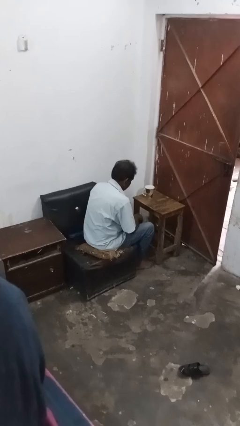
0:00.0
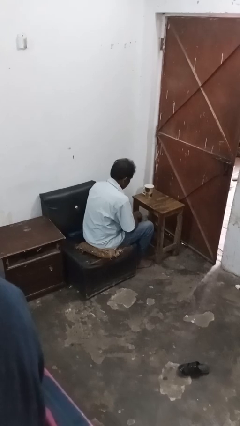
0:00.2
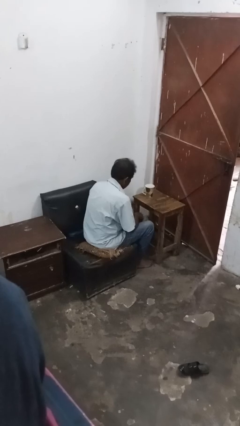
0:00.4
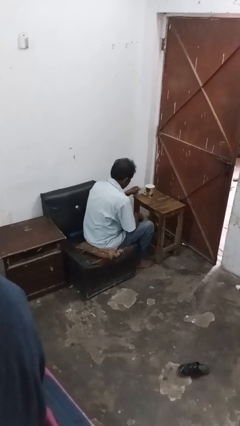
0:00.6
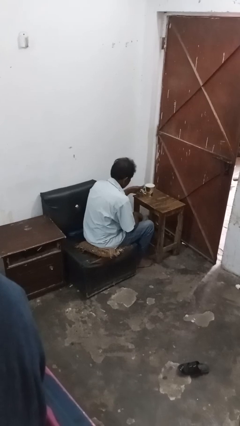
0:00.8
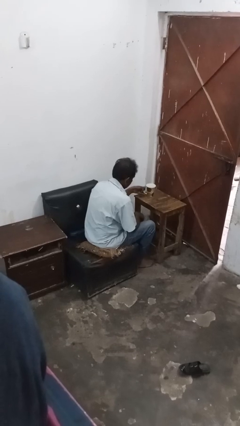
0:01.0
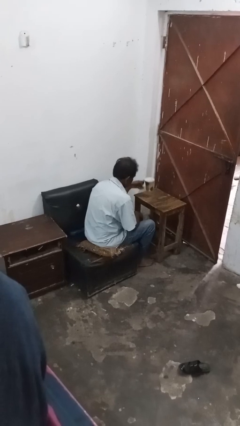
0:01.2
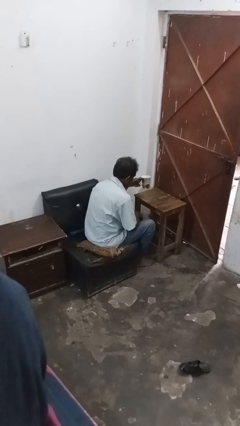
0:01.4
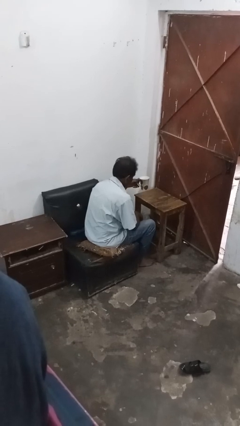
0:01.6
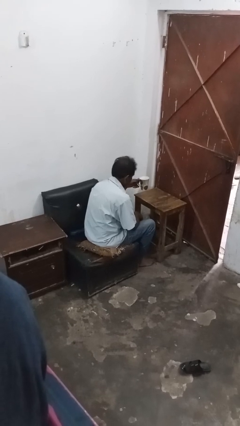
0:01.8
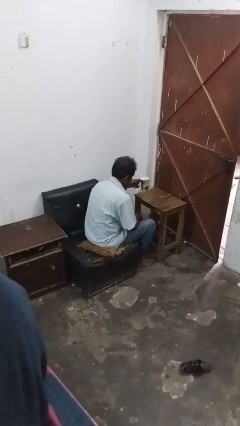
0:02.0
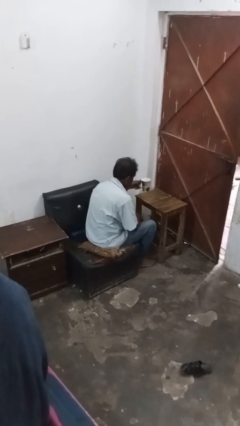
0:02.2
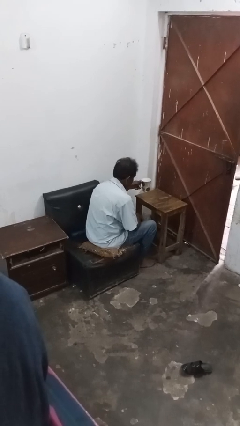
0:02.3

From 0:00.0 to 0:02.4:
person picks up object from table

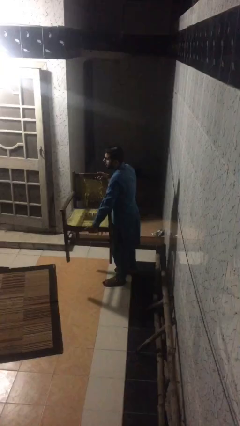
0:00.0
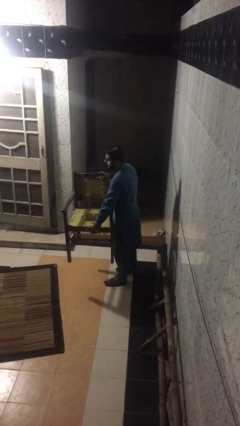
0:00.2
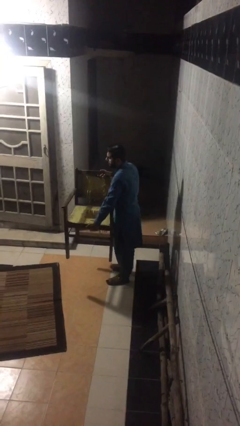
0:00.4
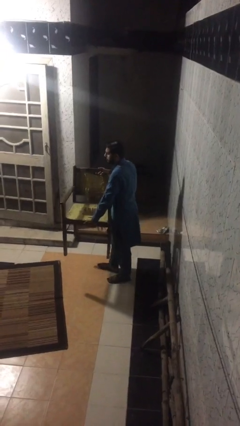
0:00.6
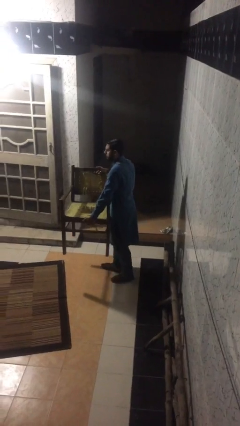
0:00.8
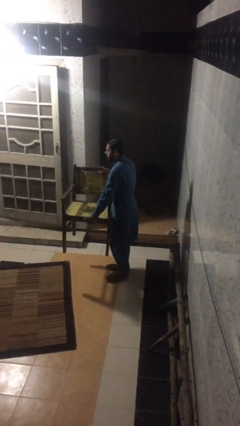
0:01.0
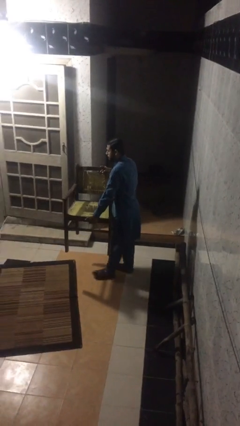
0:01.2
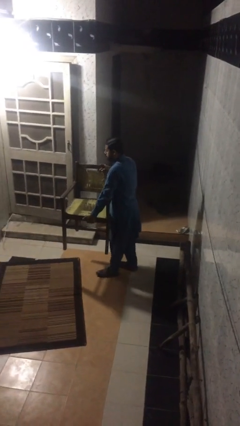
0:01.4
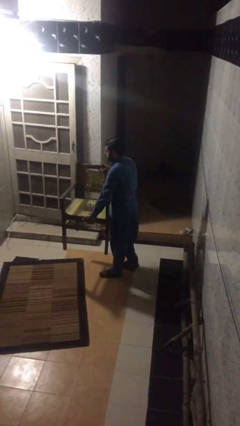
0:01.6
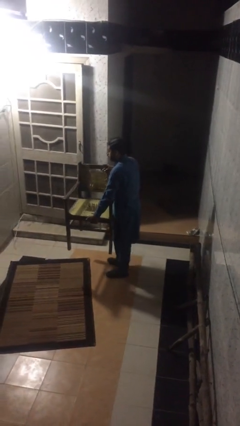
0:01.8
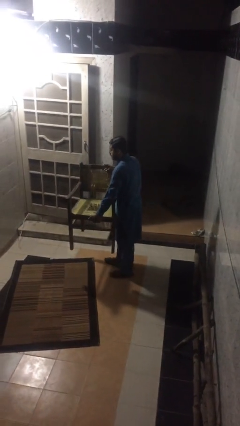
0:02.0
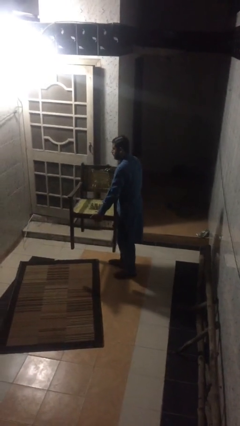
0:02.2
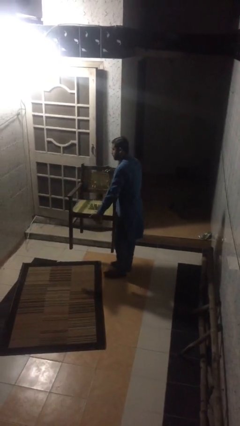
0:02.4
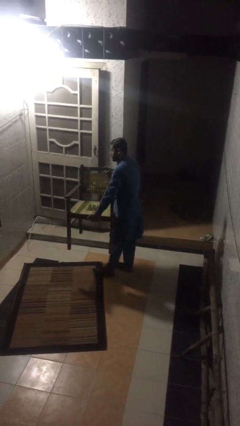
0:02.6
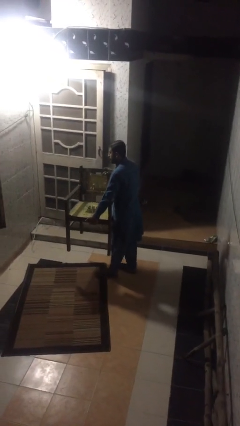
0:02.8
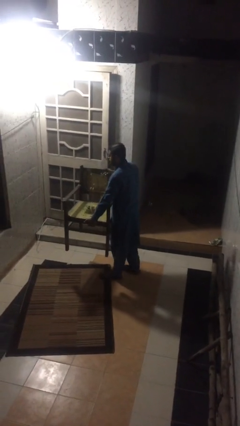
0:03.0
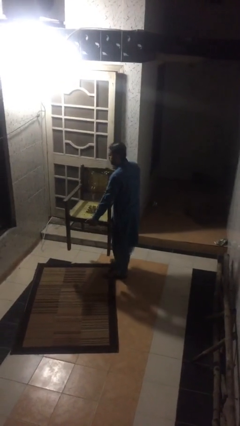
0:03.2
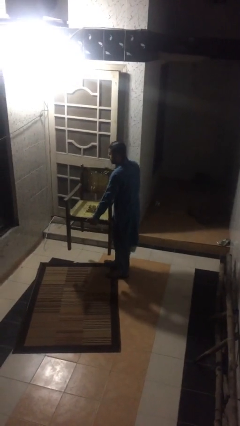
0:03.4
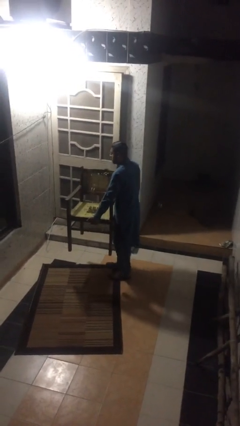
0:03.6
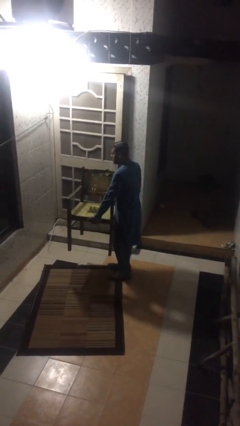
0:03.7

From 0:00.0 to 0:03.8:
person carries heavy object

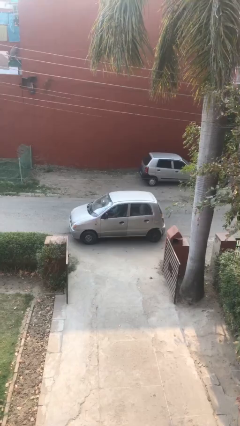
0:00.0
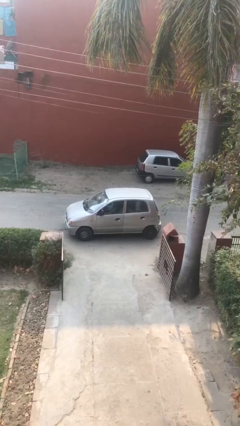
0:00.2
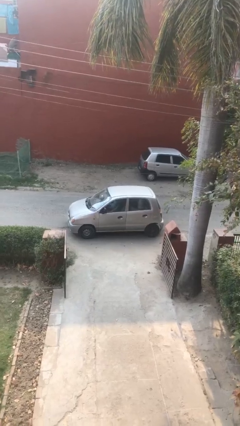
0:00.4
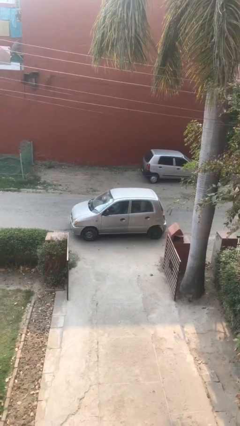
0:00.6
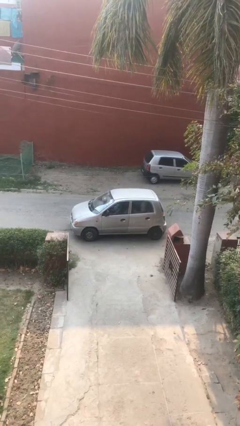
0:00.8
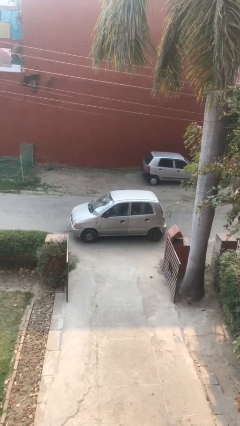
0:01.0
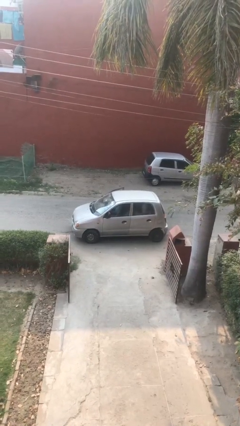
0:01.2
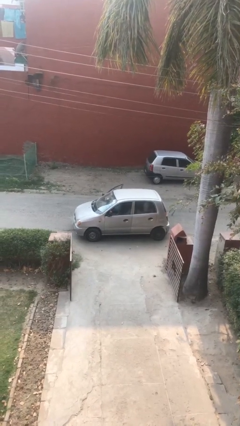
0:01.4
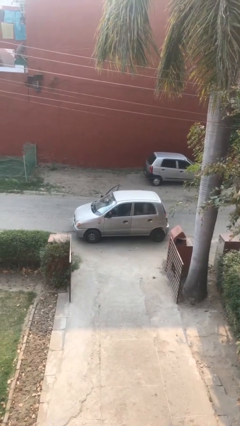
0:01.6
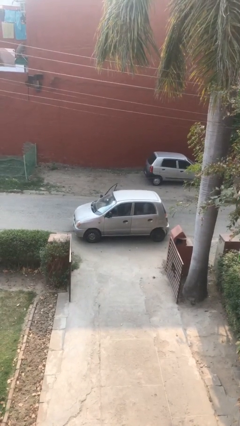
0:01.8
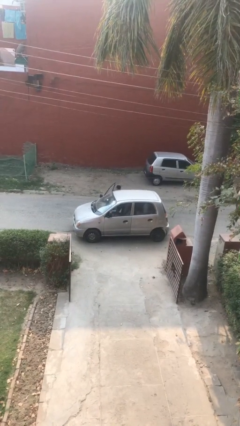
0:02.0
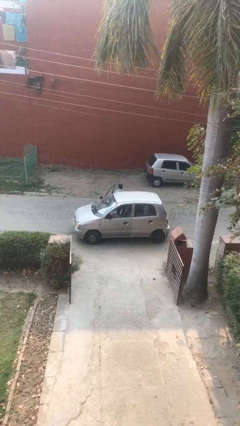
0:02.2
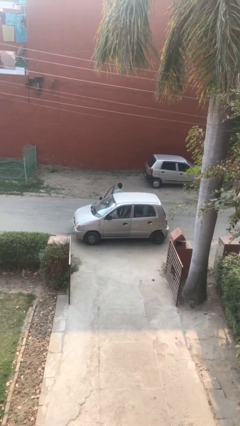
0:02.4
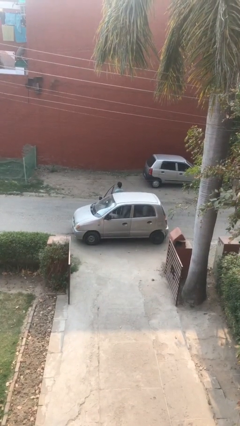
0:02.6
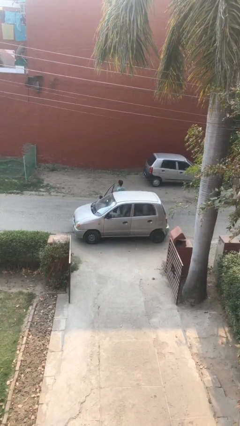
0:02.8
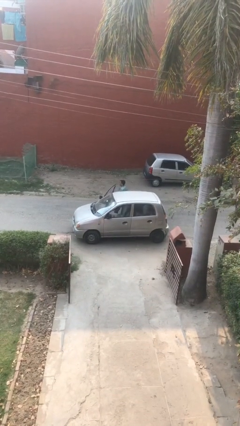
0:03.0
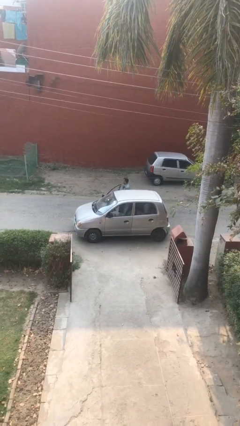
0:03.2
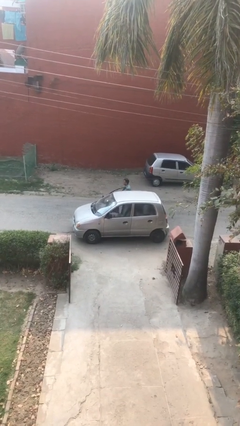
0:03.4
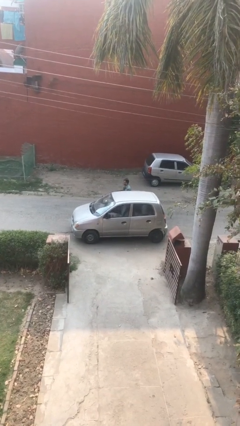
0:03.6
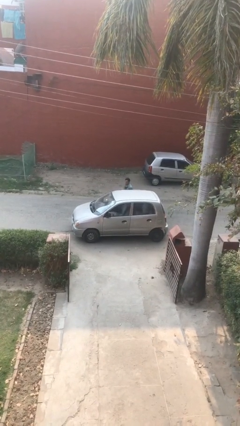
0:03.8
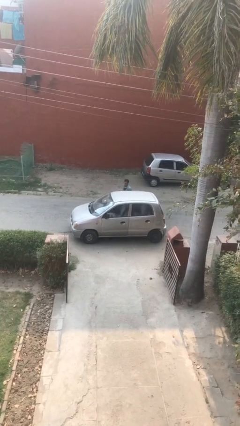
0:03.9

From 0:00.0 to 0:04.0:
car drops off person

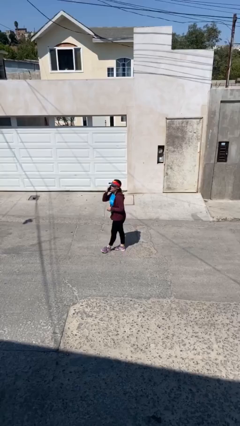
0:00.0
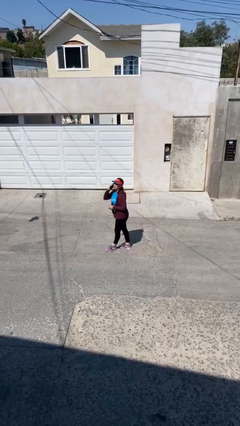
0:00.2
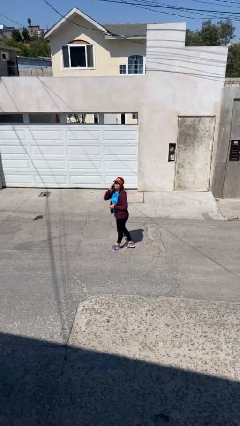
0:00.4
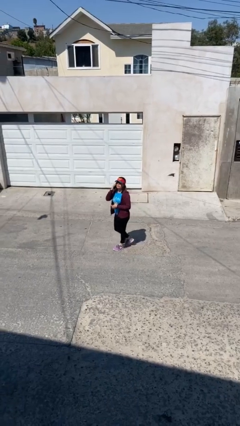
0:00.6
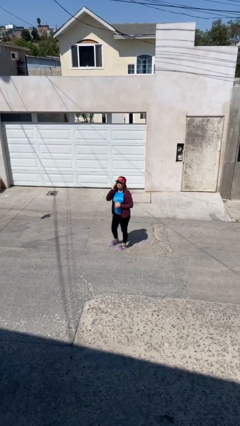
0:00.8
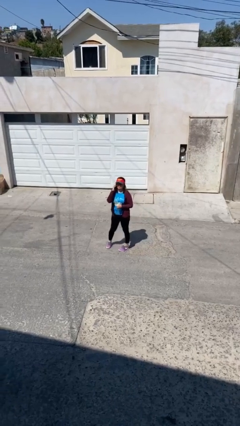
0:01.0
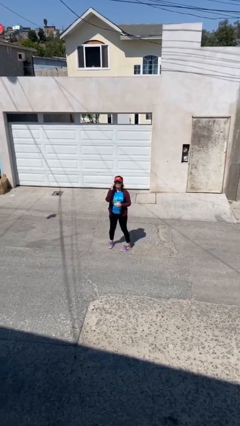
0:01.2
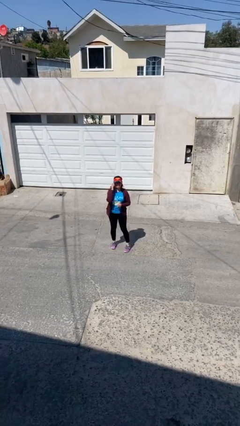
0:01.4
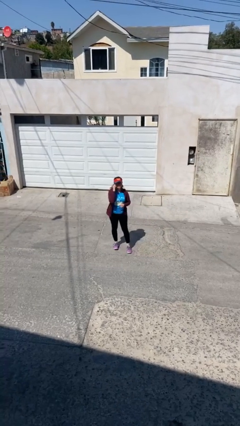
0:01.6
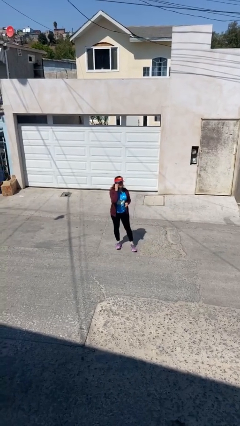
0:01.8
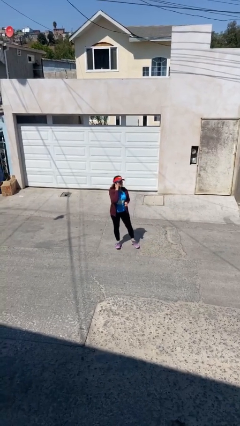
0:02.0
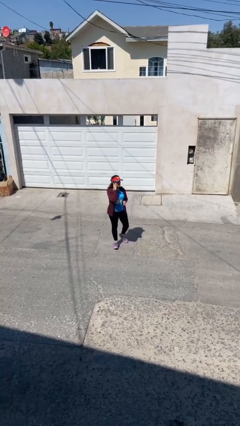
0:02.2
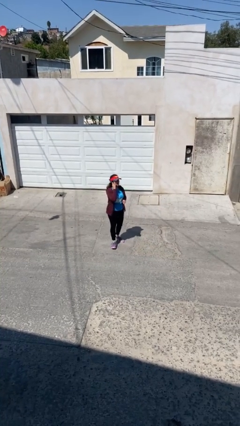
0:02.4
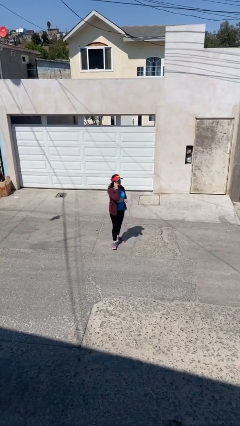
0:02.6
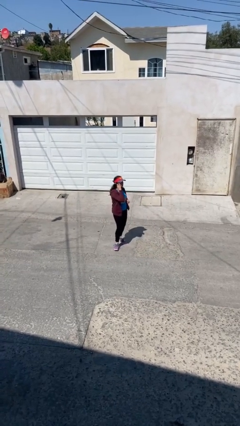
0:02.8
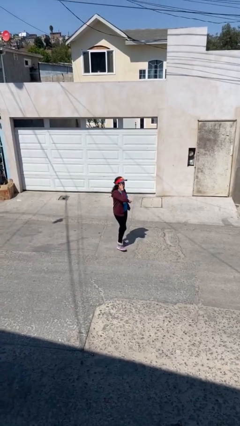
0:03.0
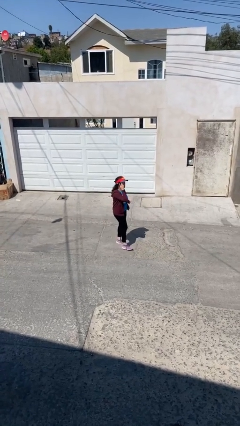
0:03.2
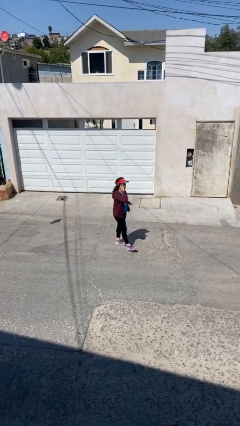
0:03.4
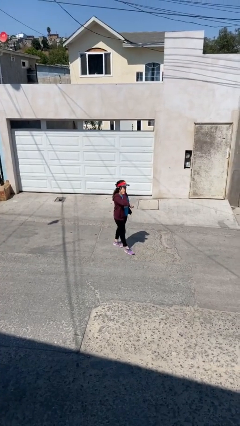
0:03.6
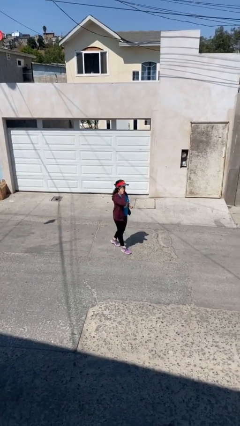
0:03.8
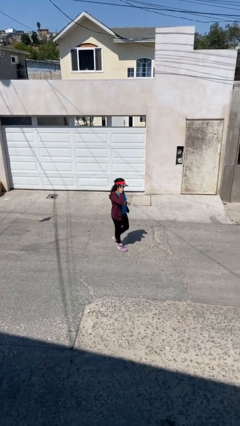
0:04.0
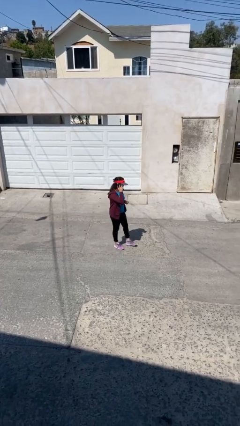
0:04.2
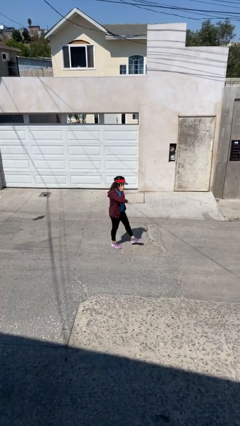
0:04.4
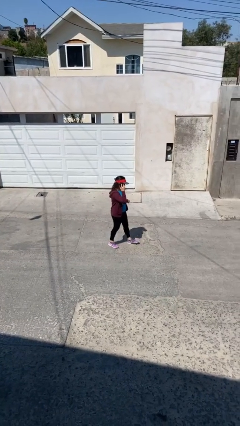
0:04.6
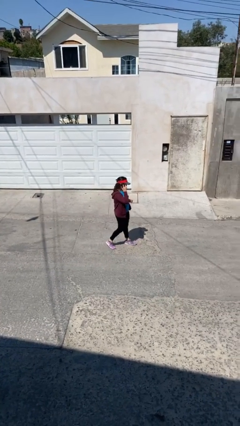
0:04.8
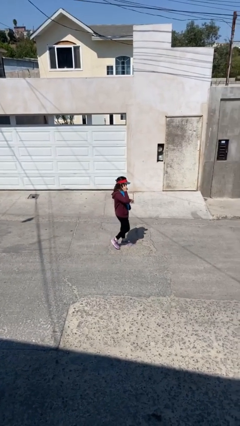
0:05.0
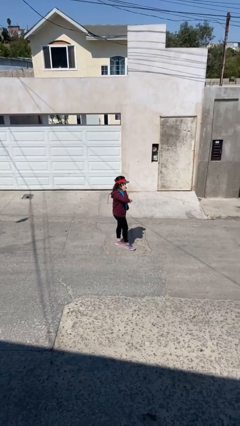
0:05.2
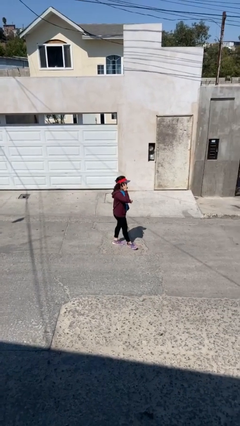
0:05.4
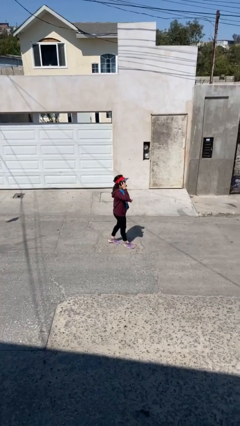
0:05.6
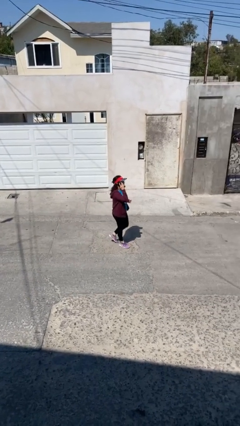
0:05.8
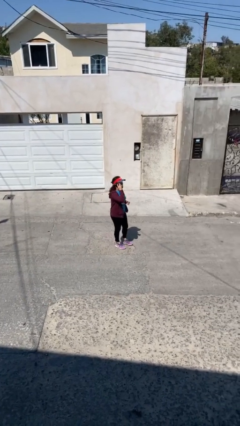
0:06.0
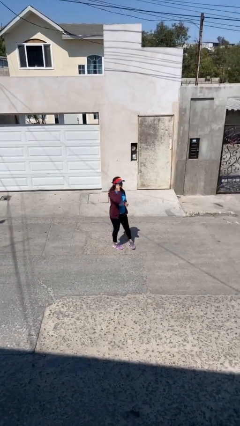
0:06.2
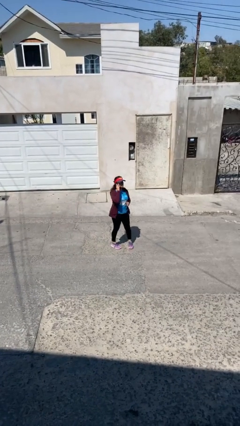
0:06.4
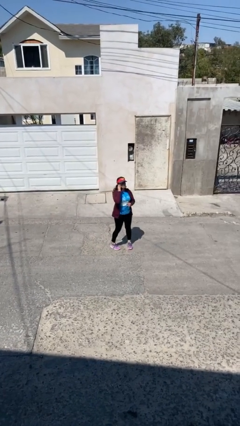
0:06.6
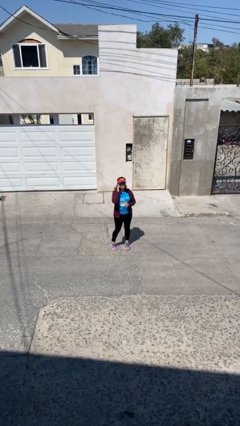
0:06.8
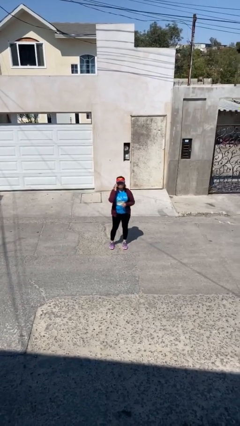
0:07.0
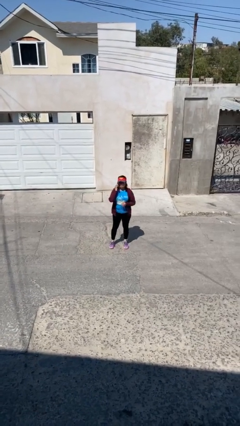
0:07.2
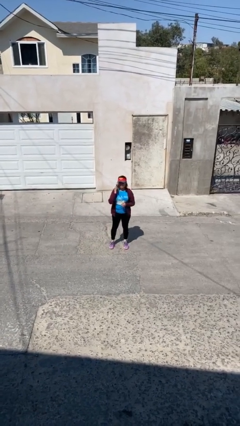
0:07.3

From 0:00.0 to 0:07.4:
person talks on phone

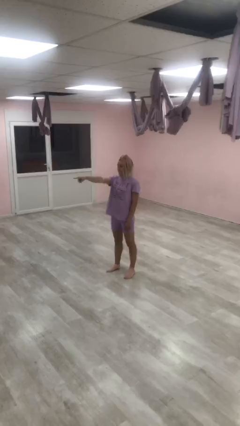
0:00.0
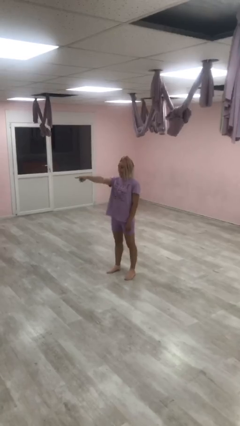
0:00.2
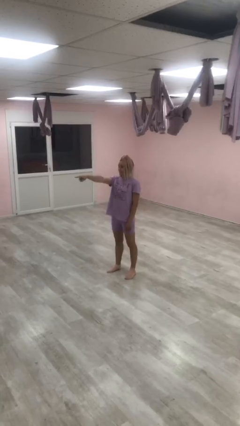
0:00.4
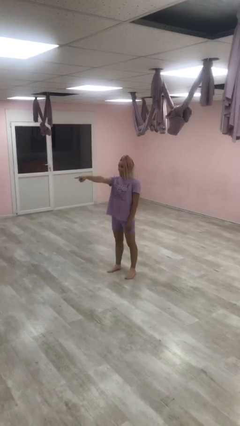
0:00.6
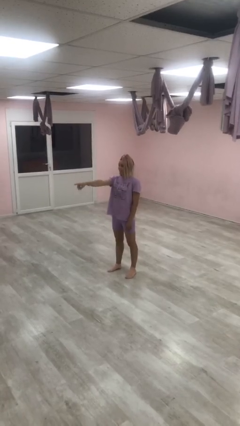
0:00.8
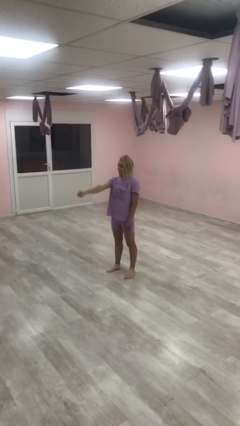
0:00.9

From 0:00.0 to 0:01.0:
person points at person
